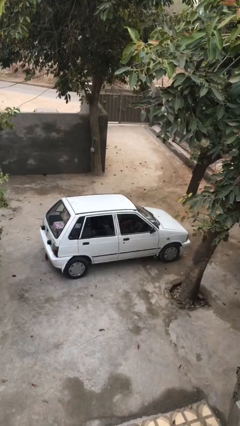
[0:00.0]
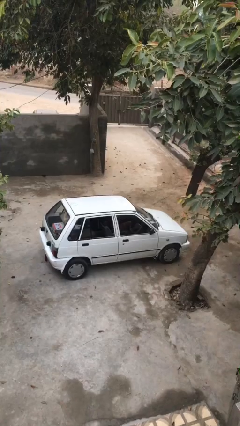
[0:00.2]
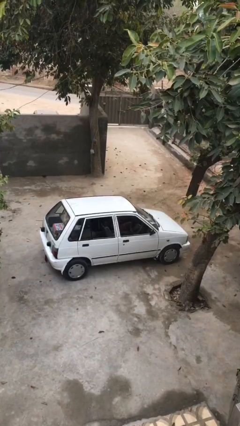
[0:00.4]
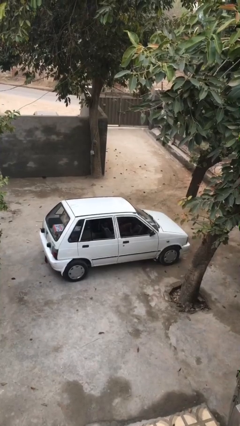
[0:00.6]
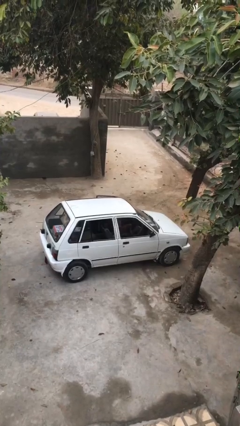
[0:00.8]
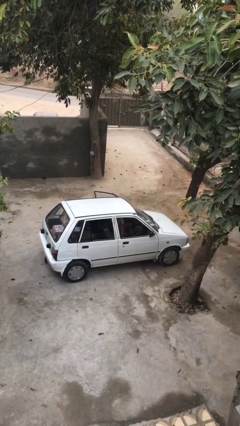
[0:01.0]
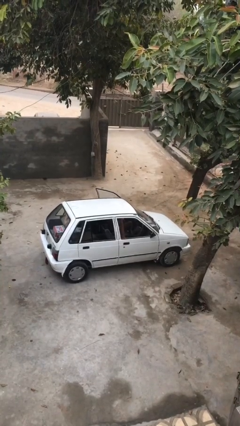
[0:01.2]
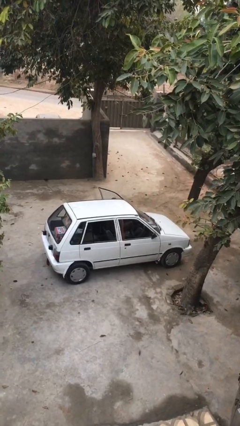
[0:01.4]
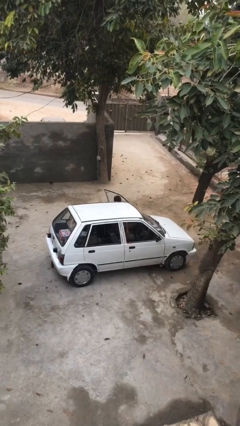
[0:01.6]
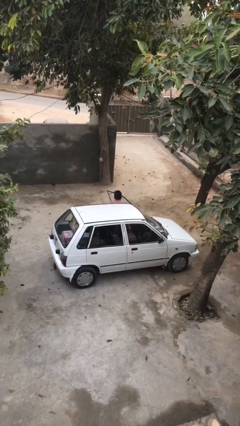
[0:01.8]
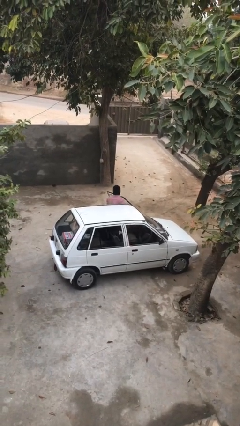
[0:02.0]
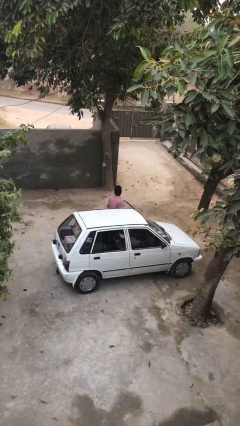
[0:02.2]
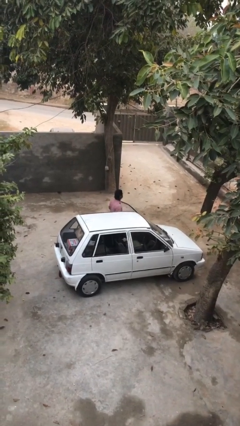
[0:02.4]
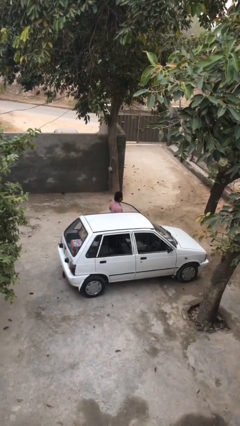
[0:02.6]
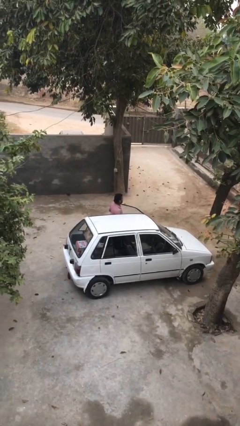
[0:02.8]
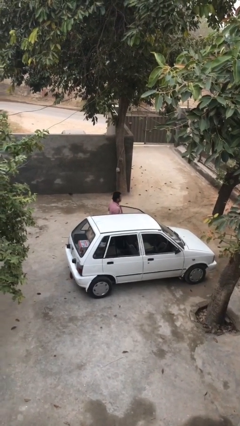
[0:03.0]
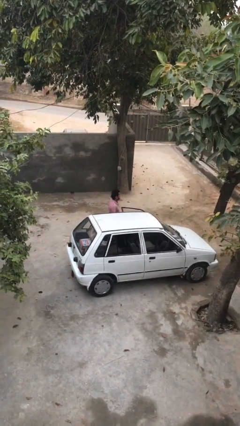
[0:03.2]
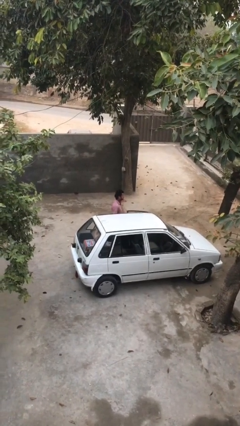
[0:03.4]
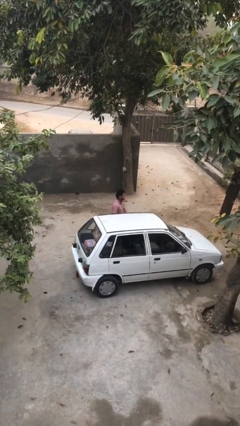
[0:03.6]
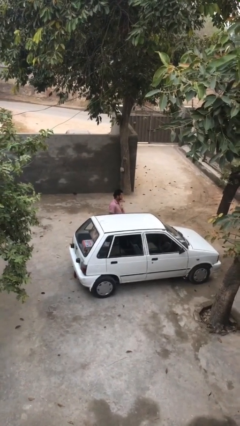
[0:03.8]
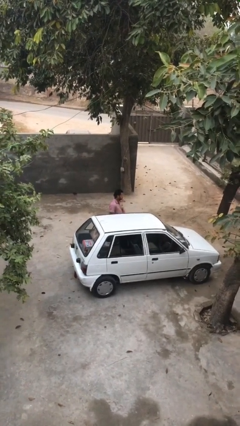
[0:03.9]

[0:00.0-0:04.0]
person exits car

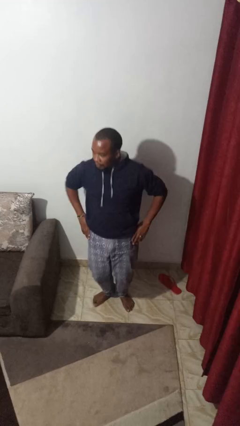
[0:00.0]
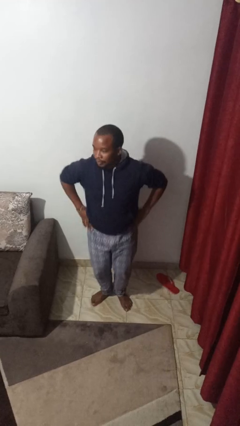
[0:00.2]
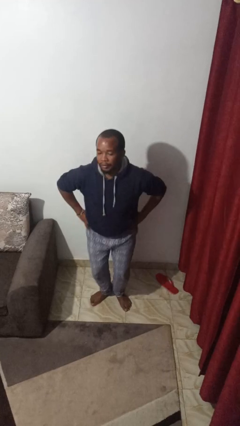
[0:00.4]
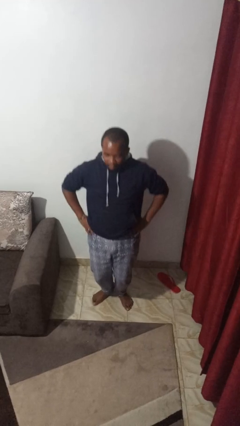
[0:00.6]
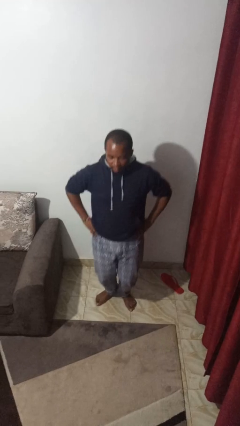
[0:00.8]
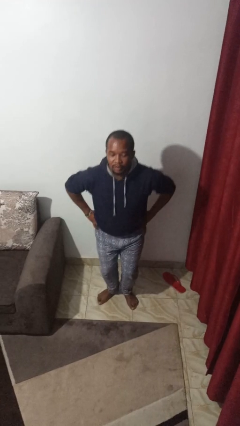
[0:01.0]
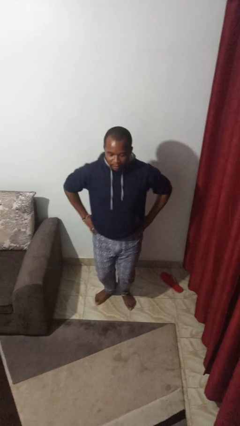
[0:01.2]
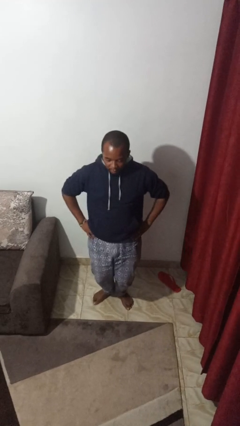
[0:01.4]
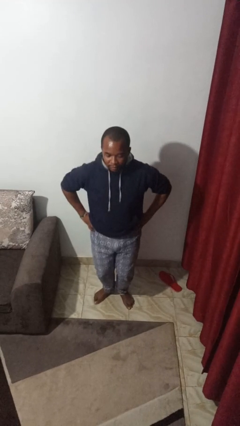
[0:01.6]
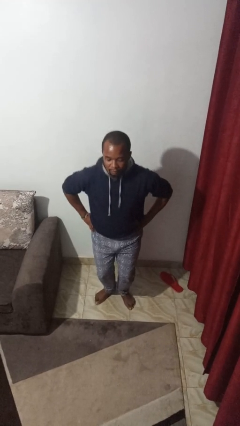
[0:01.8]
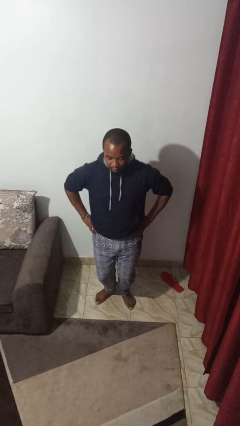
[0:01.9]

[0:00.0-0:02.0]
person wiggles hips

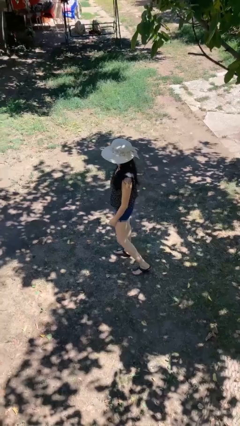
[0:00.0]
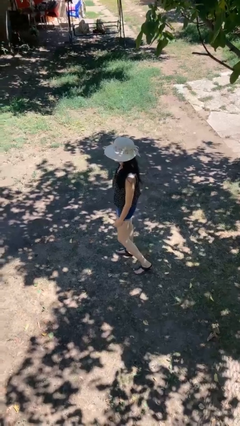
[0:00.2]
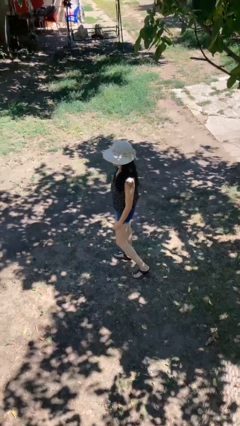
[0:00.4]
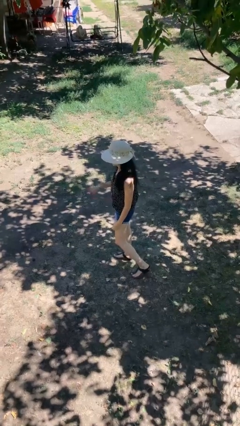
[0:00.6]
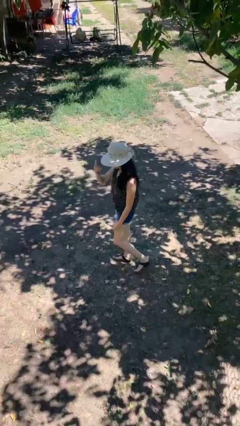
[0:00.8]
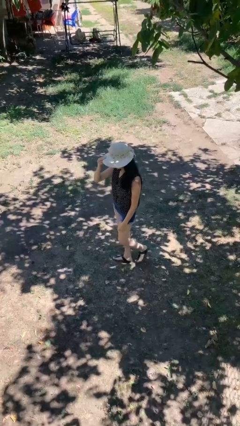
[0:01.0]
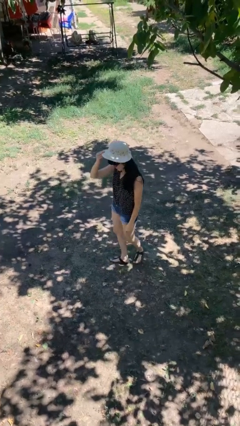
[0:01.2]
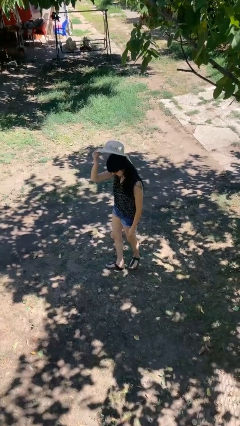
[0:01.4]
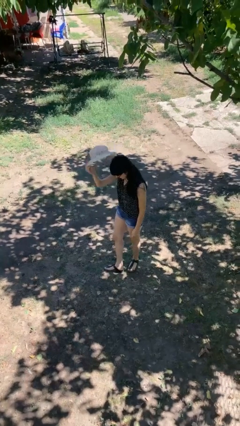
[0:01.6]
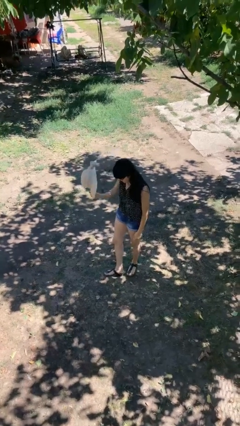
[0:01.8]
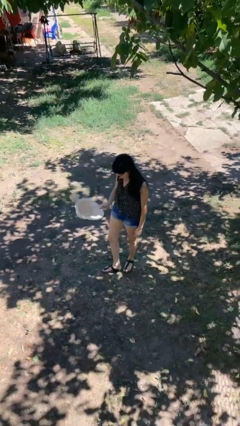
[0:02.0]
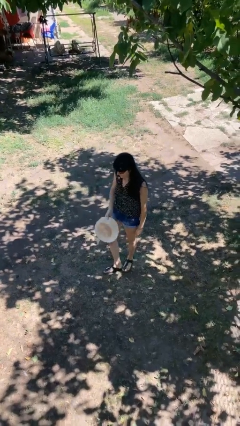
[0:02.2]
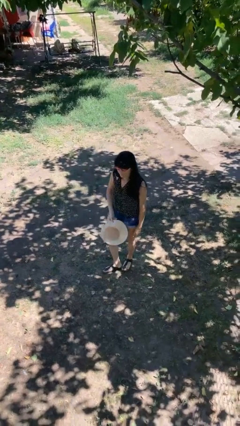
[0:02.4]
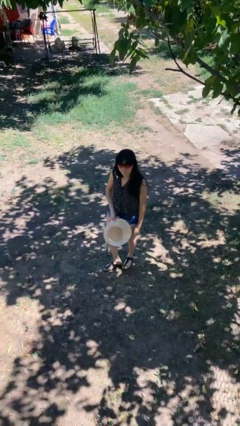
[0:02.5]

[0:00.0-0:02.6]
person takes off hat

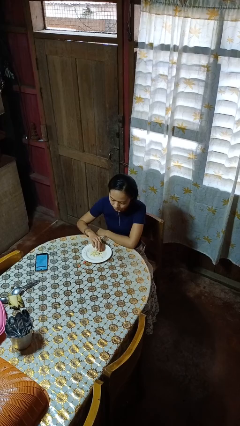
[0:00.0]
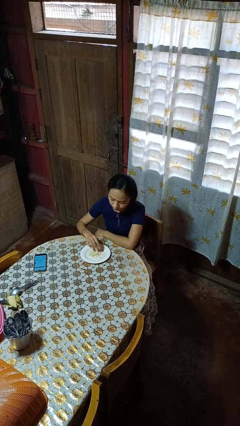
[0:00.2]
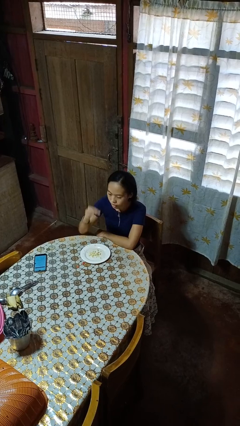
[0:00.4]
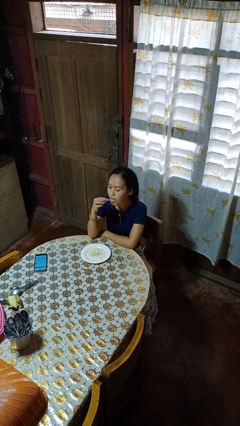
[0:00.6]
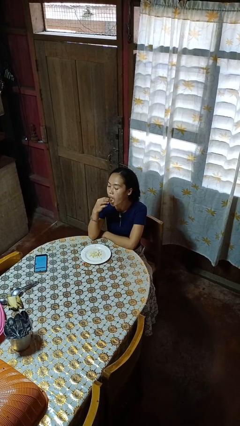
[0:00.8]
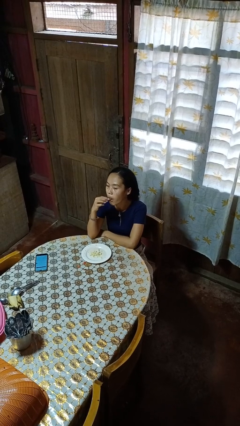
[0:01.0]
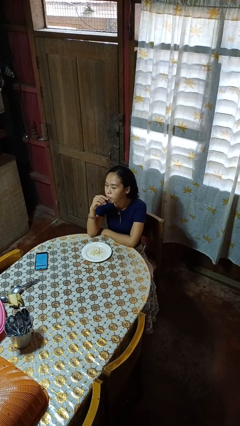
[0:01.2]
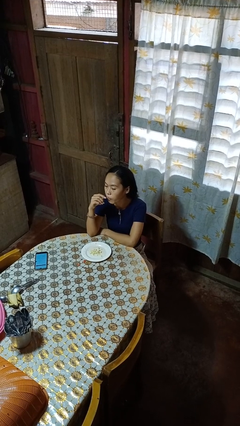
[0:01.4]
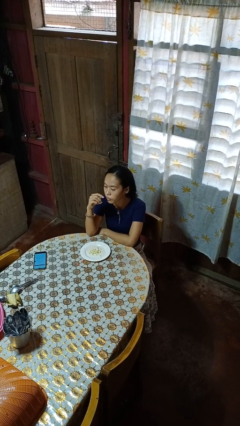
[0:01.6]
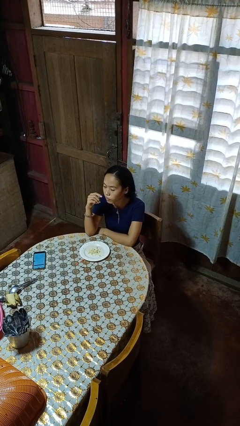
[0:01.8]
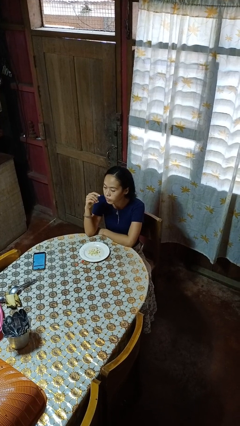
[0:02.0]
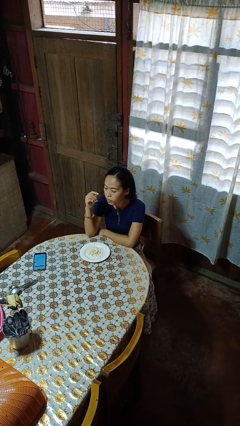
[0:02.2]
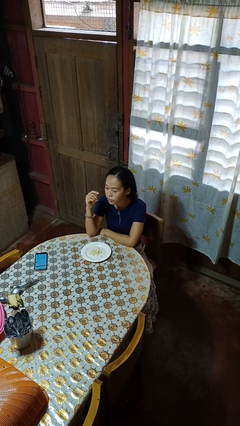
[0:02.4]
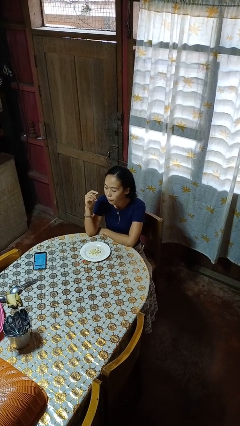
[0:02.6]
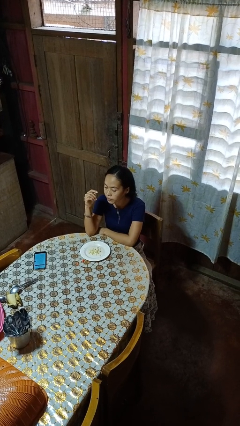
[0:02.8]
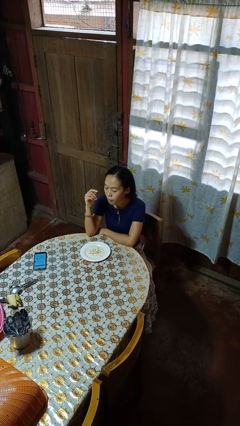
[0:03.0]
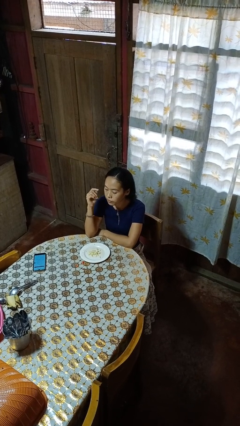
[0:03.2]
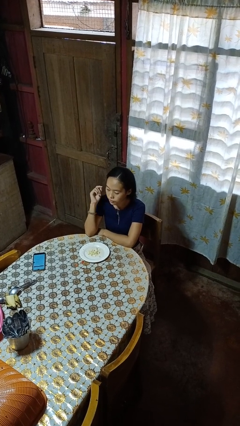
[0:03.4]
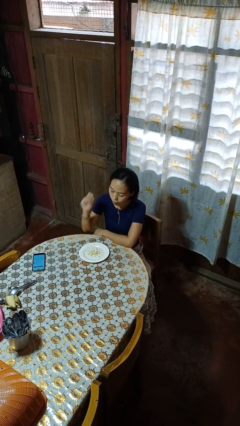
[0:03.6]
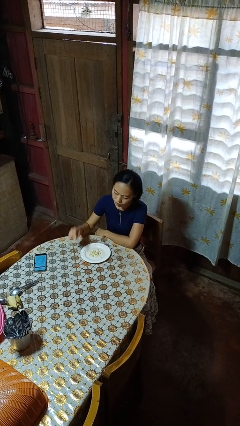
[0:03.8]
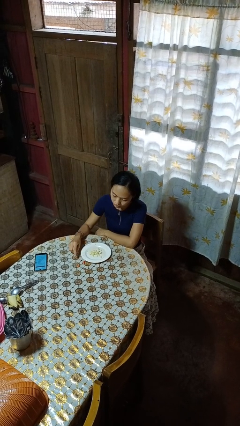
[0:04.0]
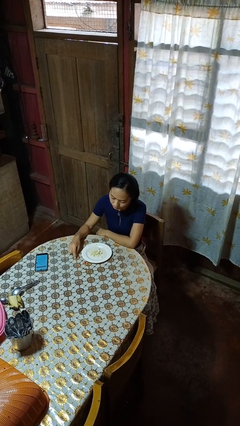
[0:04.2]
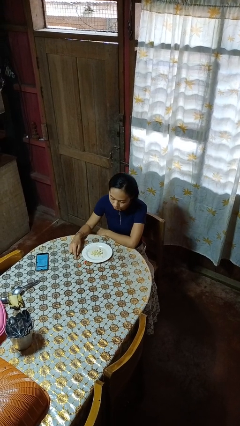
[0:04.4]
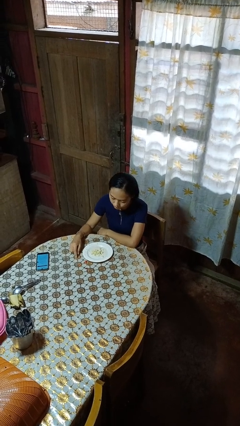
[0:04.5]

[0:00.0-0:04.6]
person eats with hands

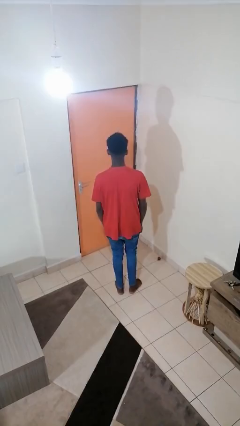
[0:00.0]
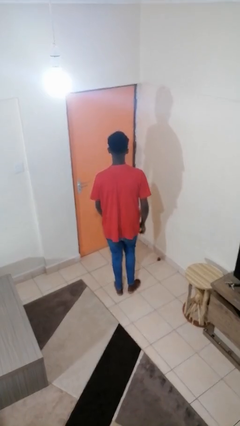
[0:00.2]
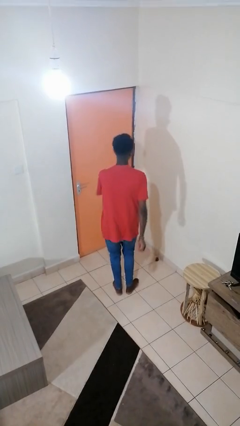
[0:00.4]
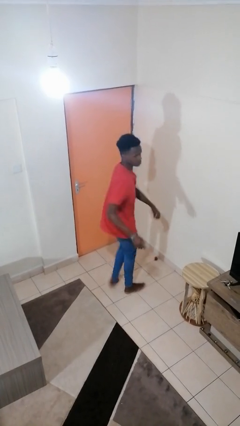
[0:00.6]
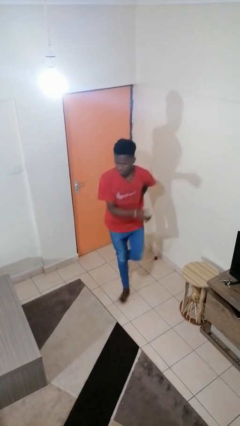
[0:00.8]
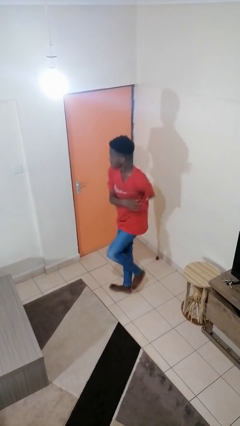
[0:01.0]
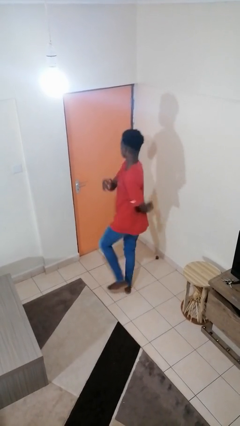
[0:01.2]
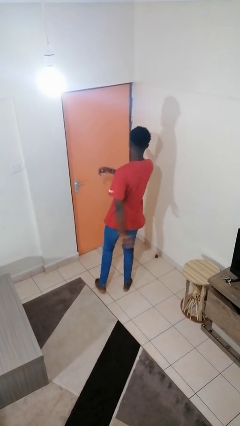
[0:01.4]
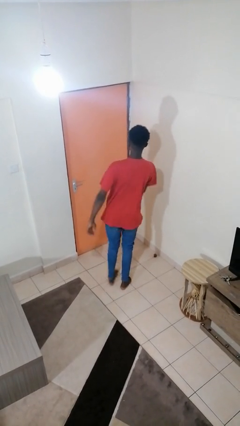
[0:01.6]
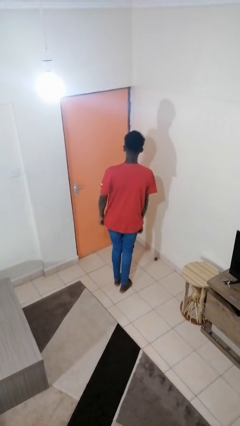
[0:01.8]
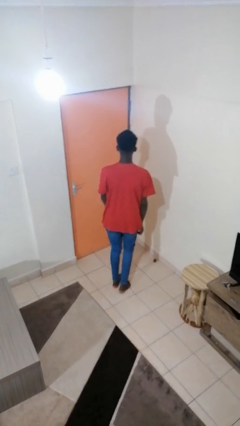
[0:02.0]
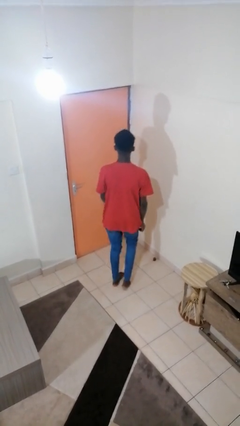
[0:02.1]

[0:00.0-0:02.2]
person twirls

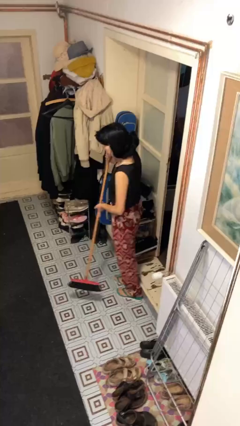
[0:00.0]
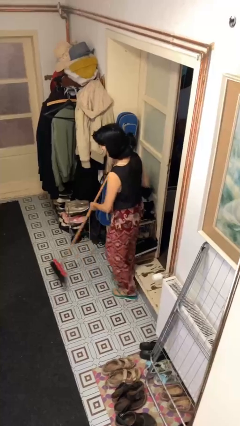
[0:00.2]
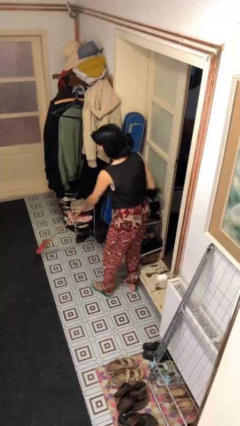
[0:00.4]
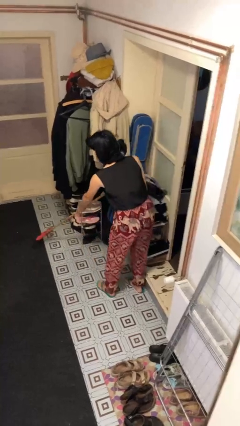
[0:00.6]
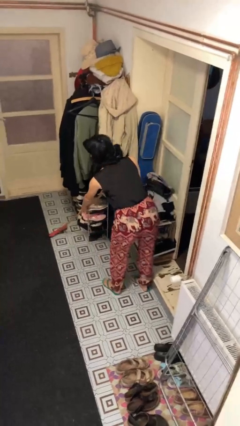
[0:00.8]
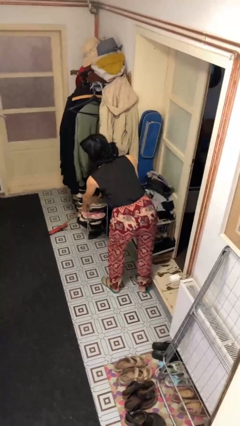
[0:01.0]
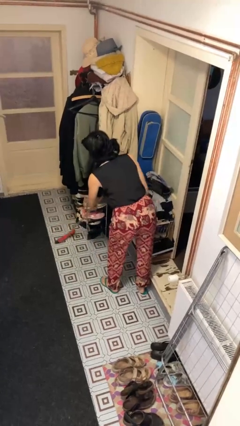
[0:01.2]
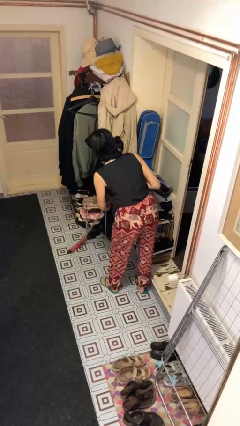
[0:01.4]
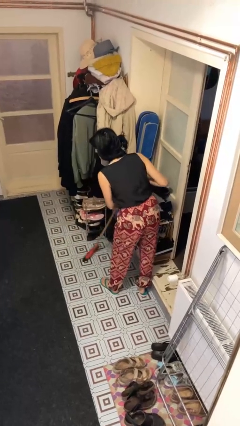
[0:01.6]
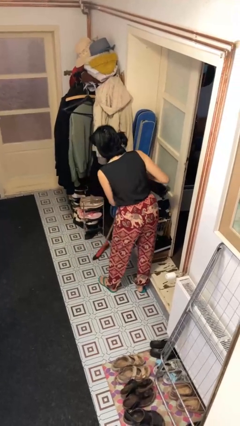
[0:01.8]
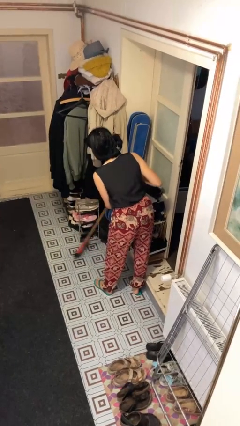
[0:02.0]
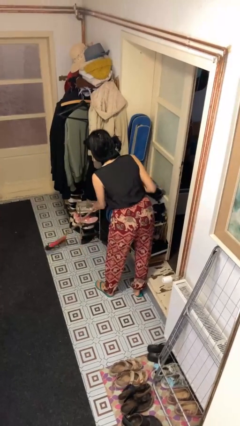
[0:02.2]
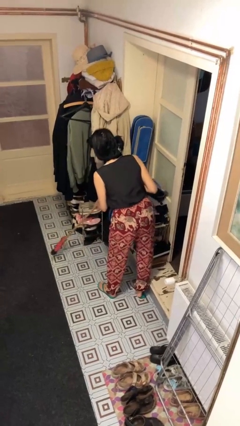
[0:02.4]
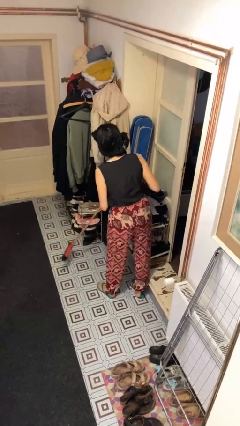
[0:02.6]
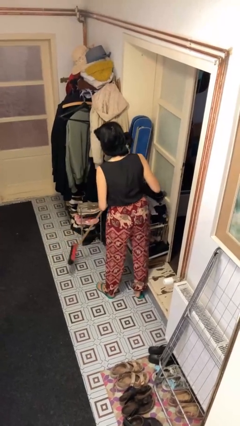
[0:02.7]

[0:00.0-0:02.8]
person sweeps floor
